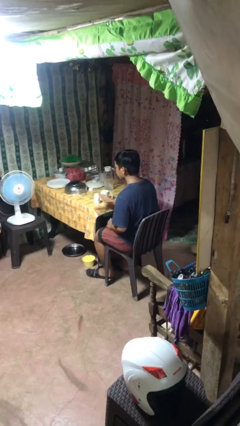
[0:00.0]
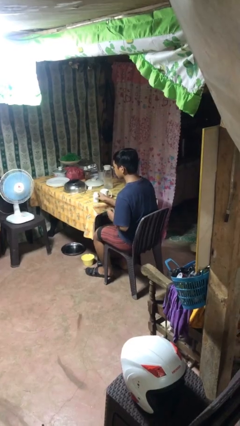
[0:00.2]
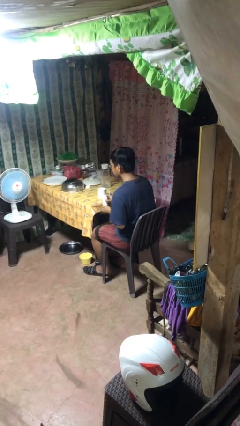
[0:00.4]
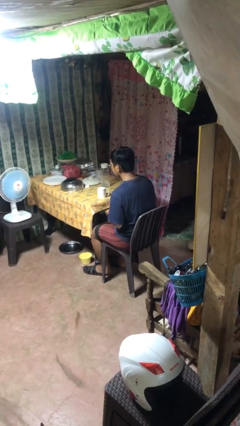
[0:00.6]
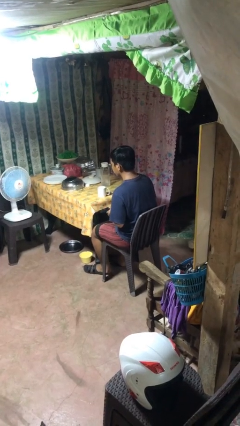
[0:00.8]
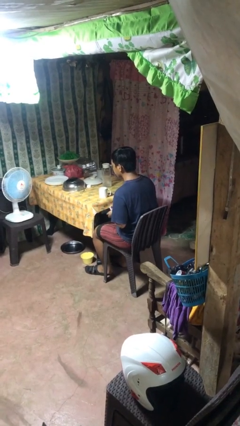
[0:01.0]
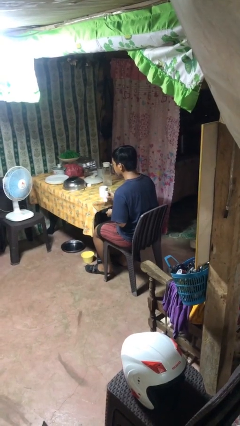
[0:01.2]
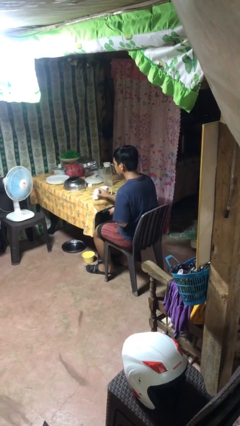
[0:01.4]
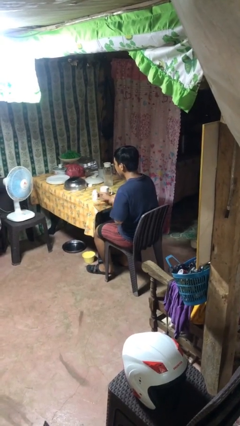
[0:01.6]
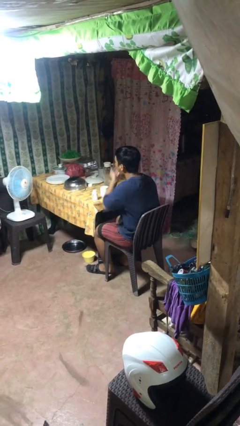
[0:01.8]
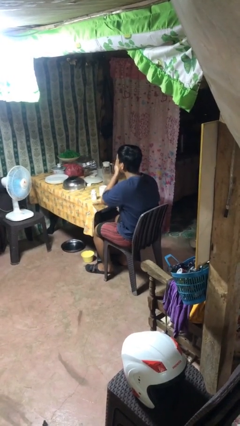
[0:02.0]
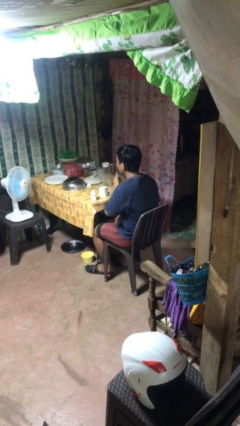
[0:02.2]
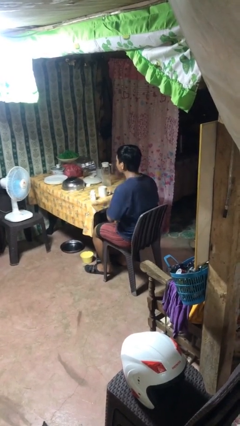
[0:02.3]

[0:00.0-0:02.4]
person takes medicine pills

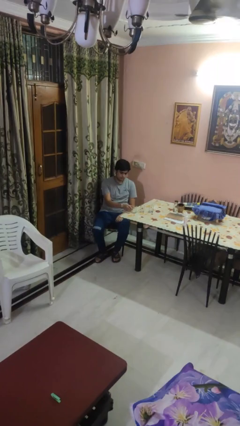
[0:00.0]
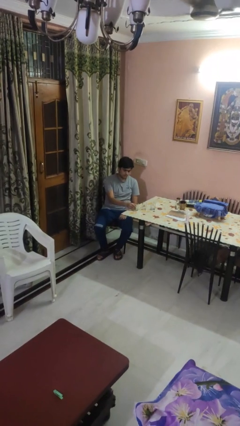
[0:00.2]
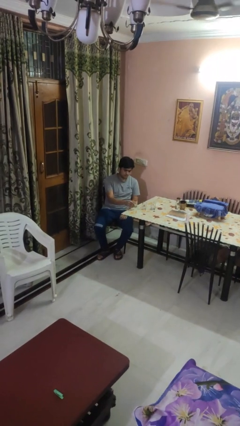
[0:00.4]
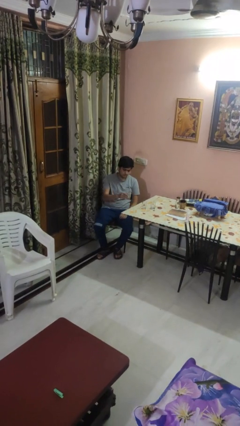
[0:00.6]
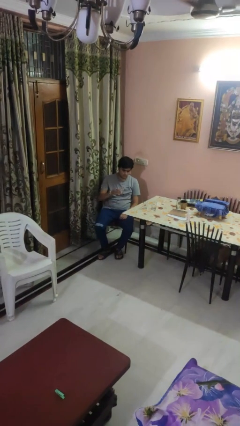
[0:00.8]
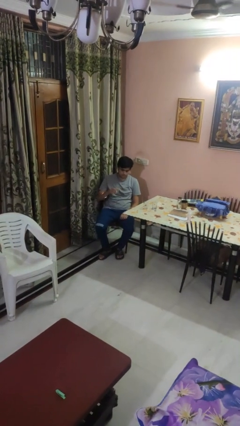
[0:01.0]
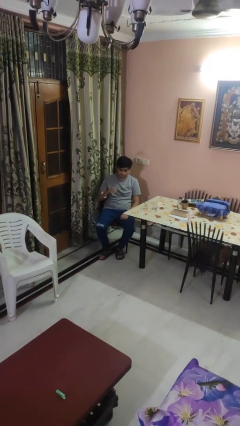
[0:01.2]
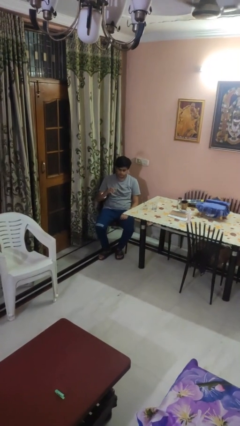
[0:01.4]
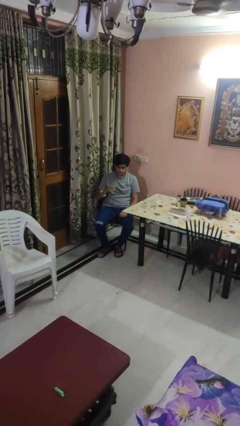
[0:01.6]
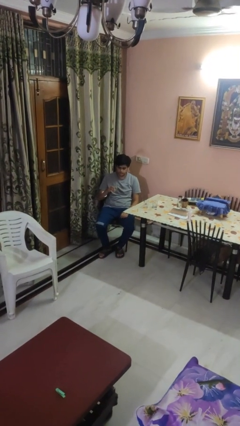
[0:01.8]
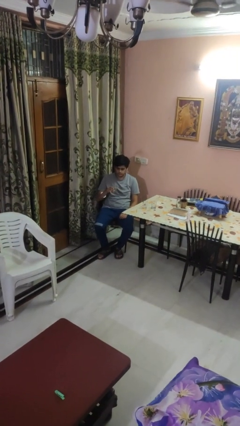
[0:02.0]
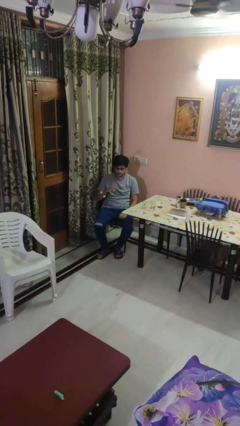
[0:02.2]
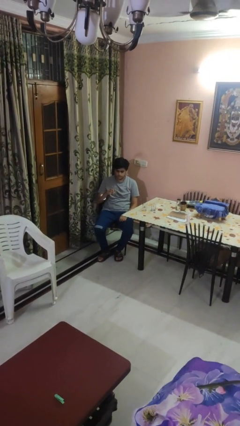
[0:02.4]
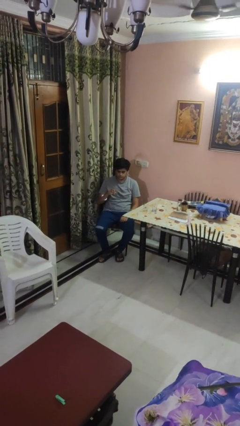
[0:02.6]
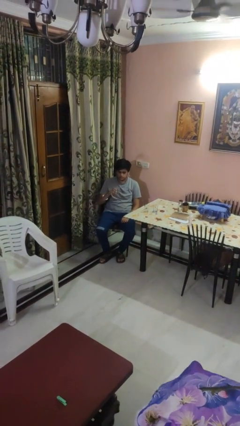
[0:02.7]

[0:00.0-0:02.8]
person picks up object from table

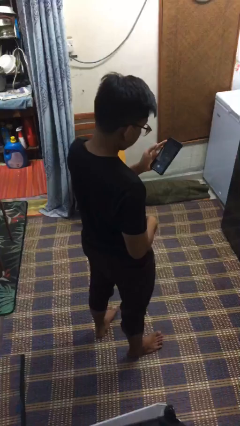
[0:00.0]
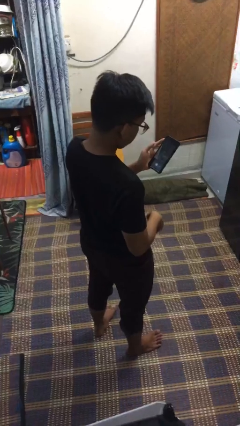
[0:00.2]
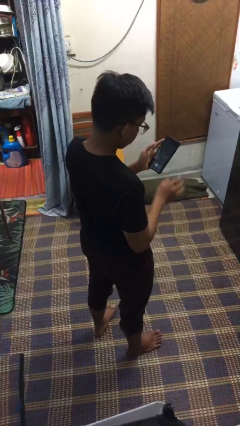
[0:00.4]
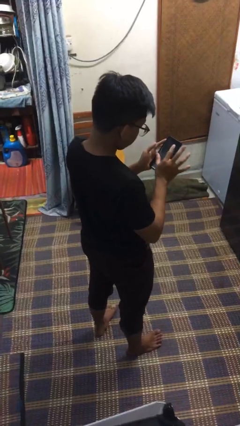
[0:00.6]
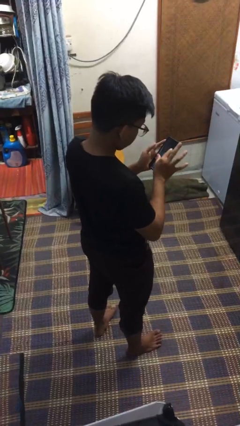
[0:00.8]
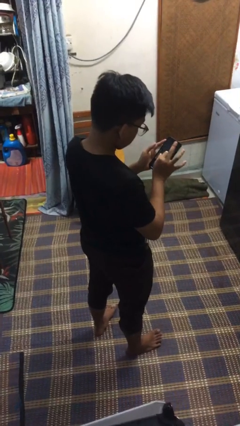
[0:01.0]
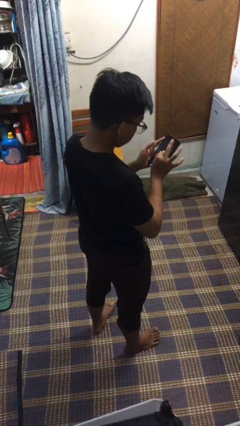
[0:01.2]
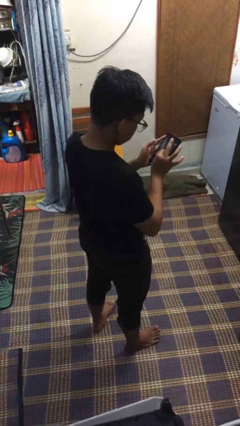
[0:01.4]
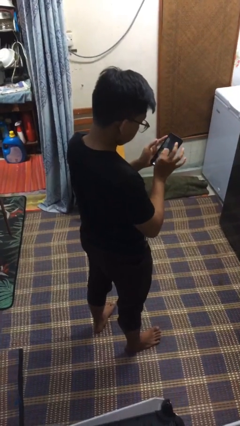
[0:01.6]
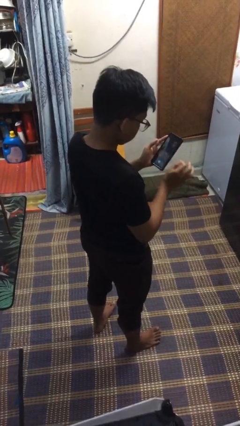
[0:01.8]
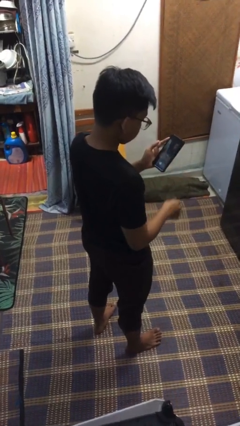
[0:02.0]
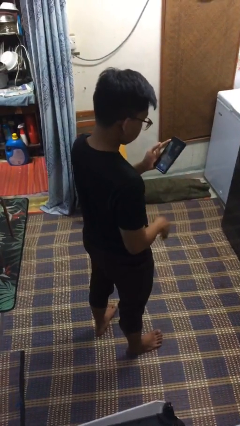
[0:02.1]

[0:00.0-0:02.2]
person gestures zoom out

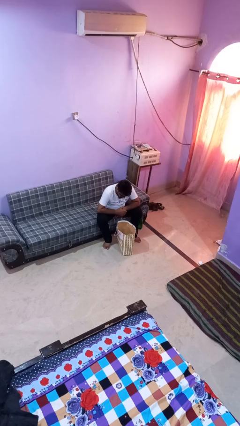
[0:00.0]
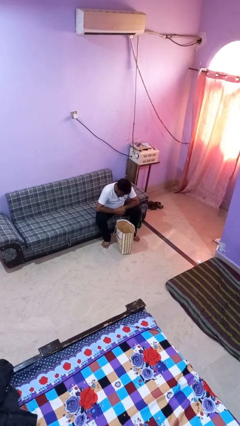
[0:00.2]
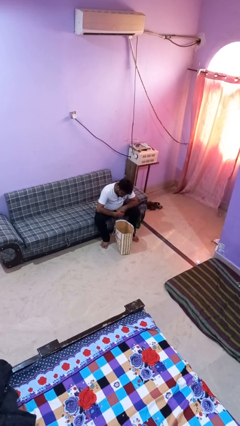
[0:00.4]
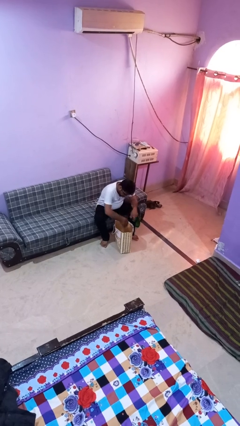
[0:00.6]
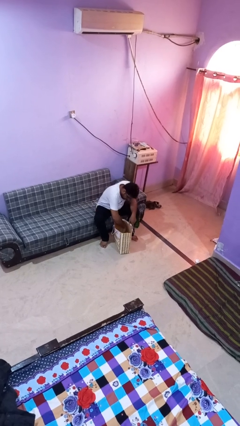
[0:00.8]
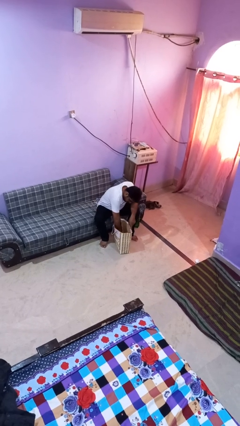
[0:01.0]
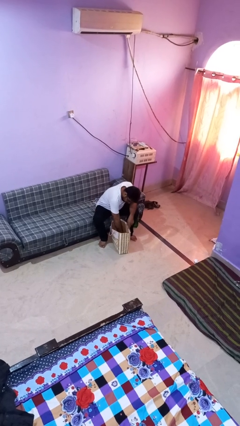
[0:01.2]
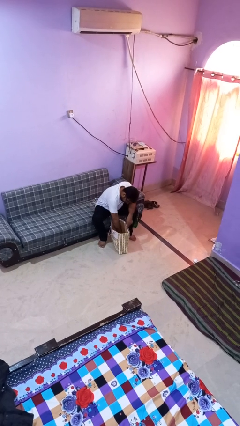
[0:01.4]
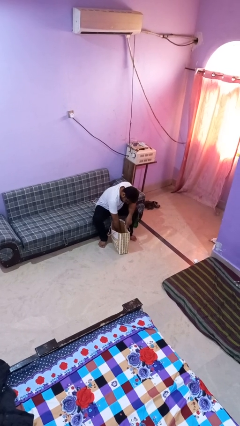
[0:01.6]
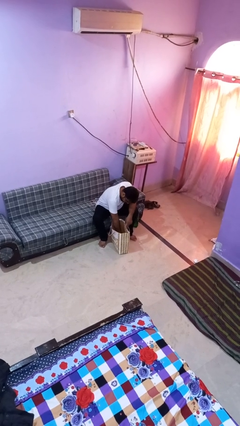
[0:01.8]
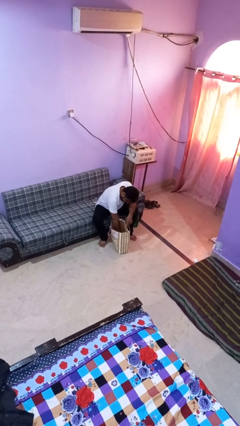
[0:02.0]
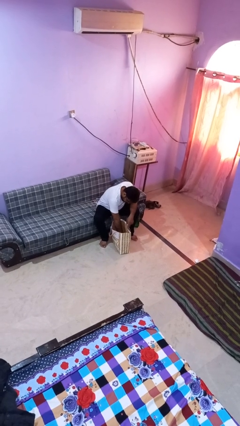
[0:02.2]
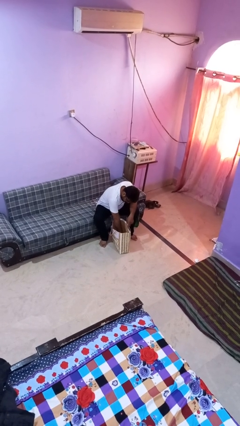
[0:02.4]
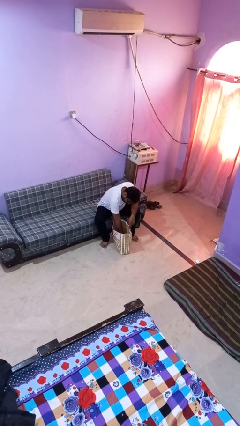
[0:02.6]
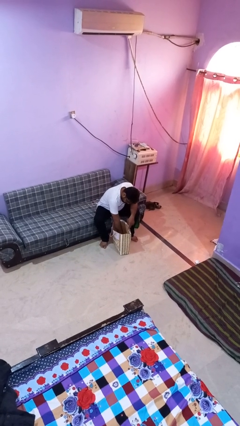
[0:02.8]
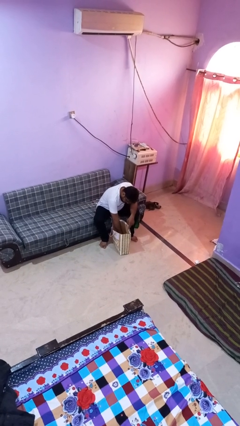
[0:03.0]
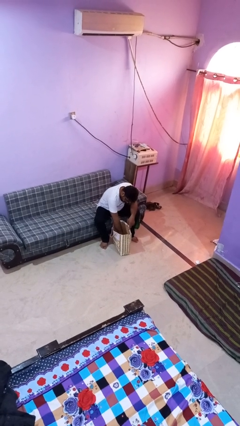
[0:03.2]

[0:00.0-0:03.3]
person searches in bag

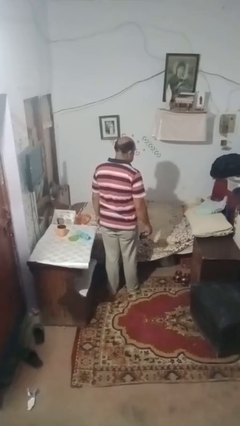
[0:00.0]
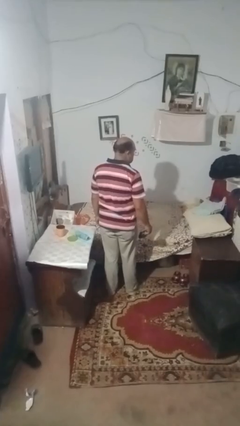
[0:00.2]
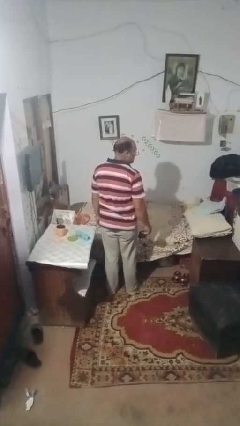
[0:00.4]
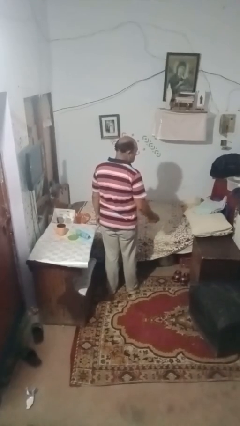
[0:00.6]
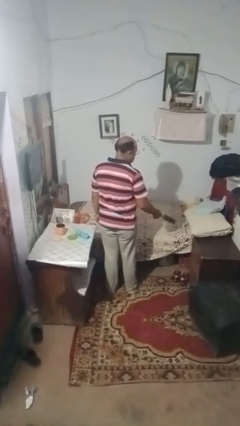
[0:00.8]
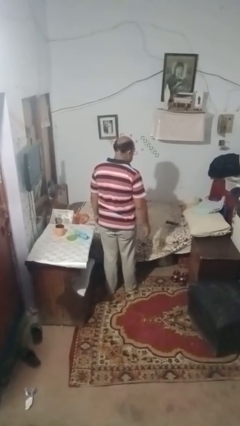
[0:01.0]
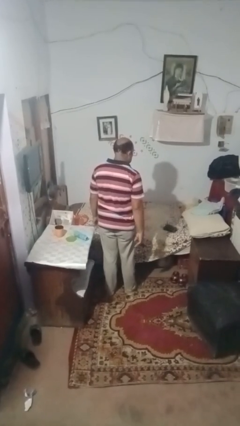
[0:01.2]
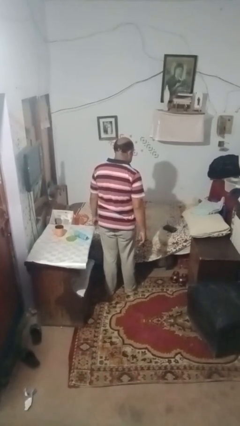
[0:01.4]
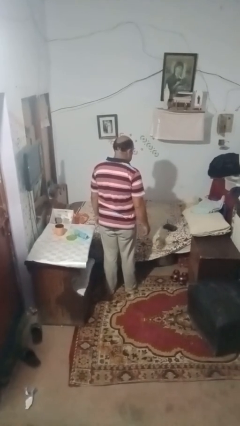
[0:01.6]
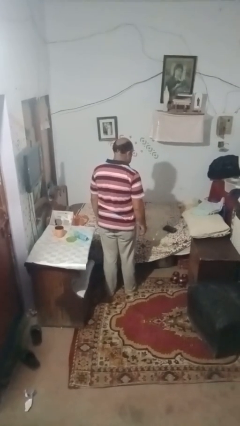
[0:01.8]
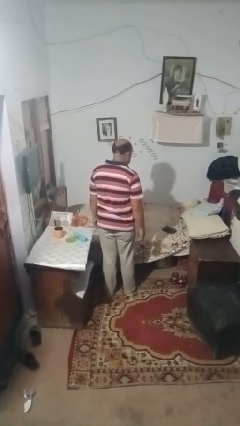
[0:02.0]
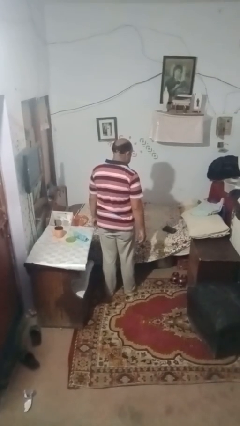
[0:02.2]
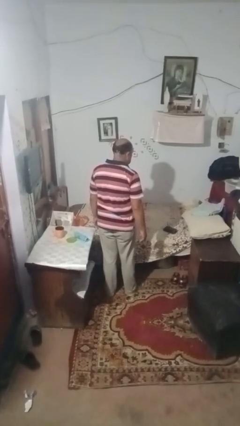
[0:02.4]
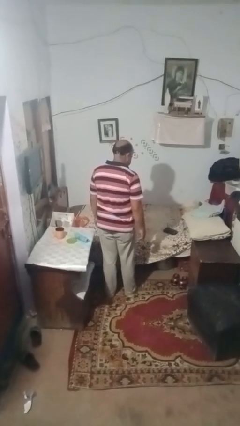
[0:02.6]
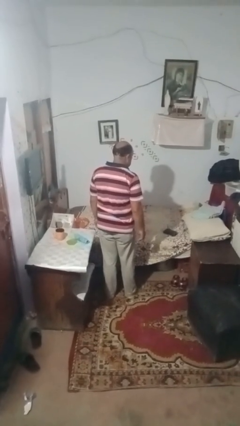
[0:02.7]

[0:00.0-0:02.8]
person throws object on bed

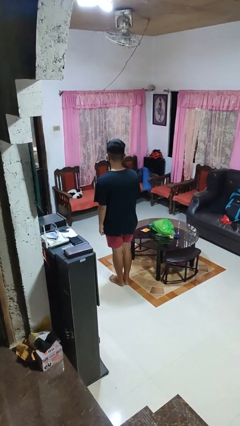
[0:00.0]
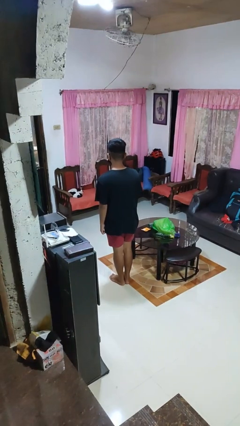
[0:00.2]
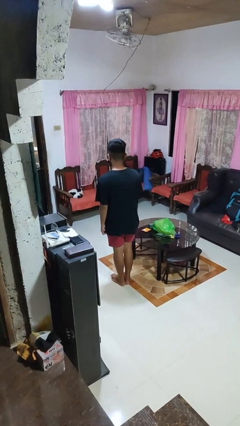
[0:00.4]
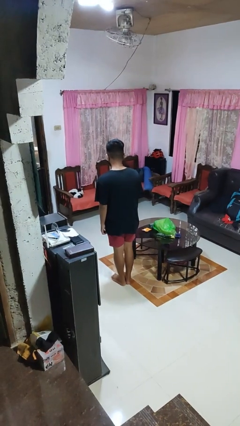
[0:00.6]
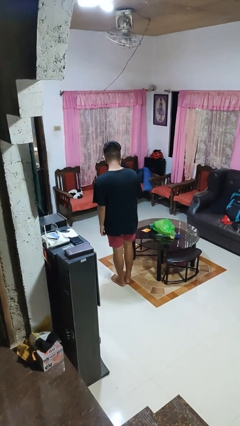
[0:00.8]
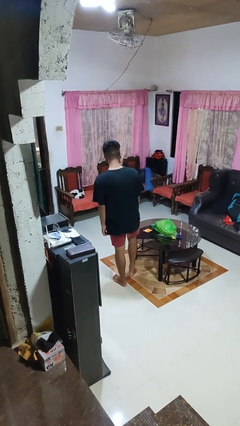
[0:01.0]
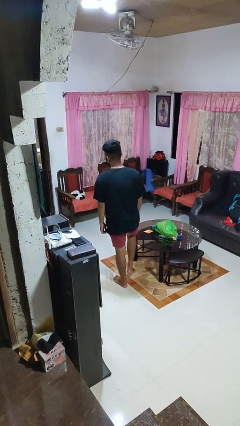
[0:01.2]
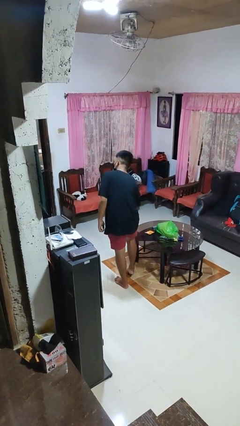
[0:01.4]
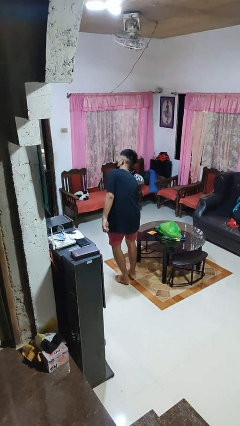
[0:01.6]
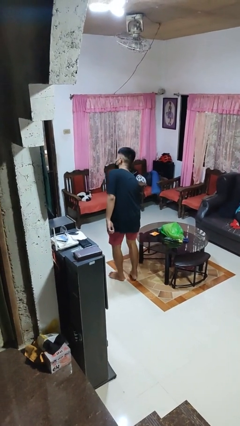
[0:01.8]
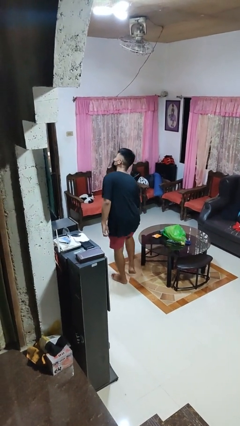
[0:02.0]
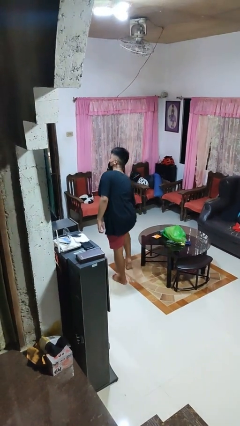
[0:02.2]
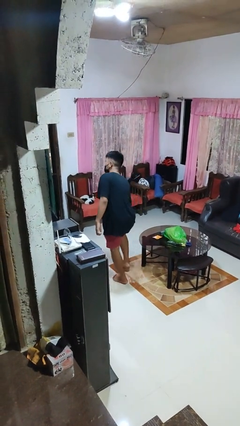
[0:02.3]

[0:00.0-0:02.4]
person bumps into table

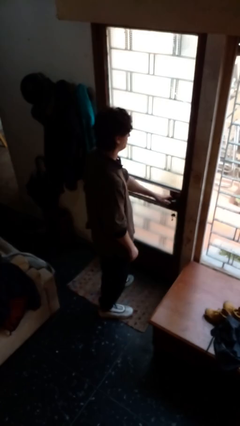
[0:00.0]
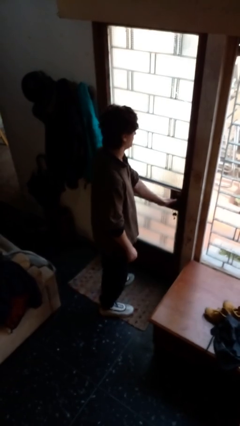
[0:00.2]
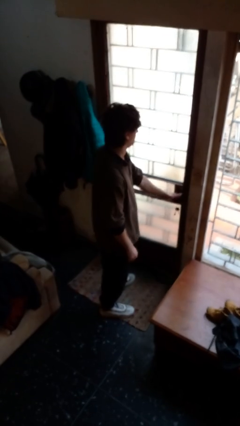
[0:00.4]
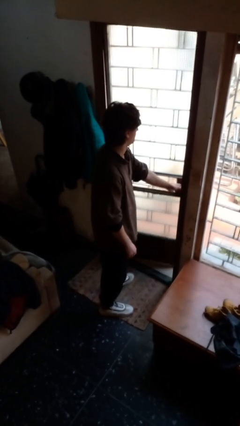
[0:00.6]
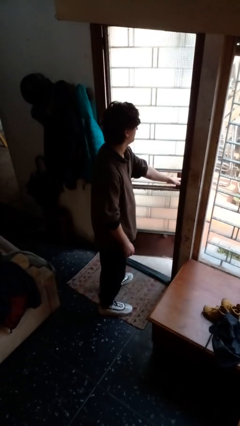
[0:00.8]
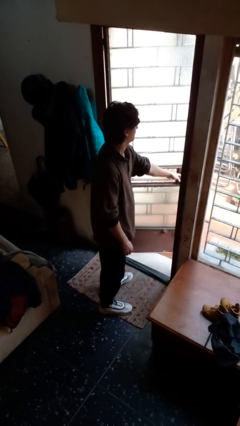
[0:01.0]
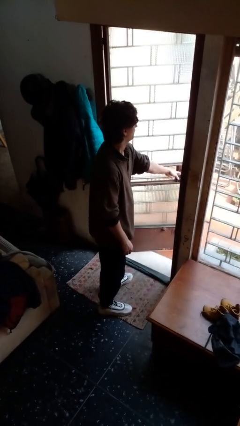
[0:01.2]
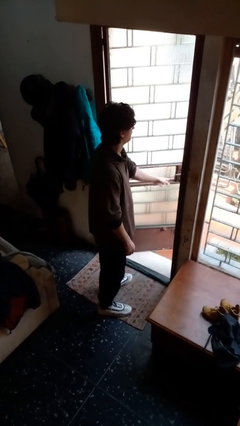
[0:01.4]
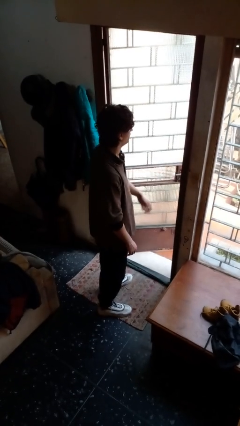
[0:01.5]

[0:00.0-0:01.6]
person opens facility door
